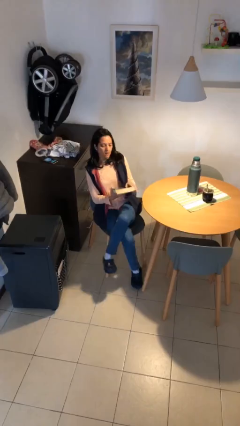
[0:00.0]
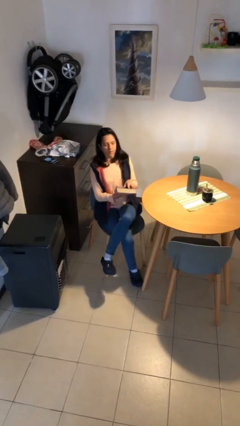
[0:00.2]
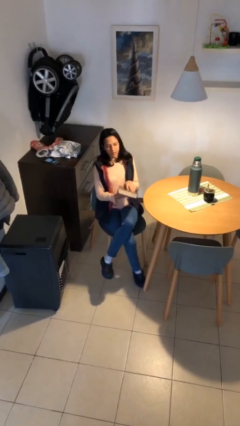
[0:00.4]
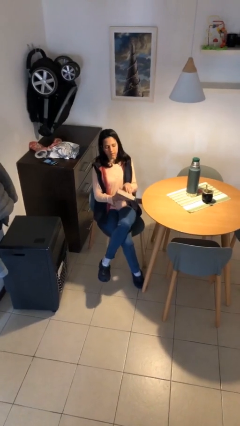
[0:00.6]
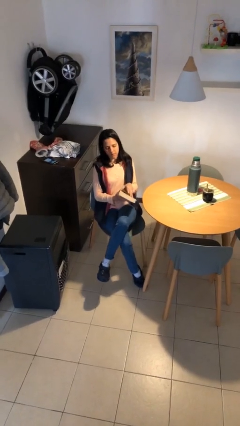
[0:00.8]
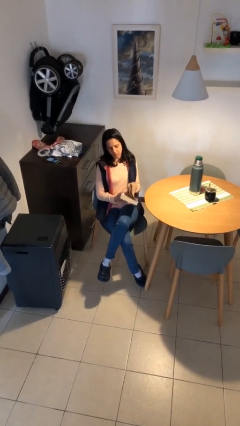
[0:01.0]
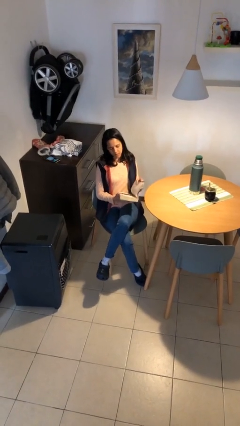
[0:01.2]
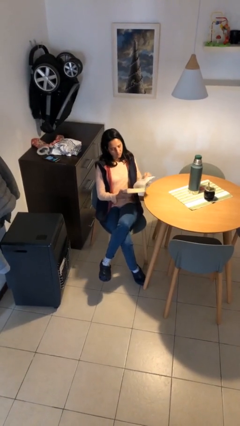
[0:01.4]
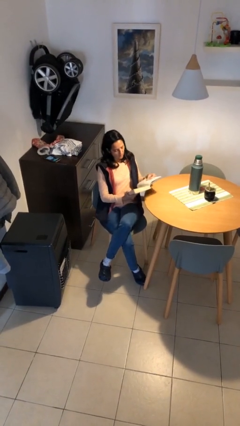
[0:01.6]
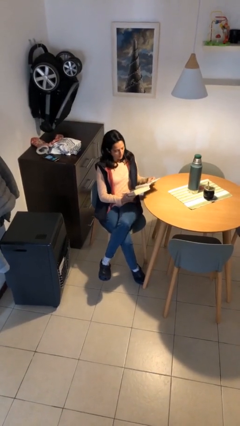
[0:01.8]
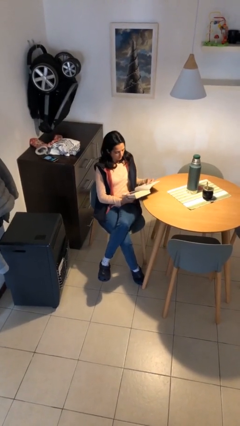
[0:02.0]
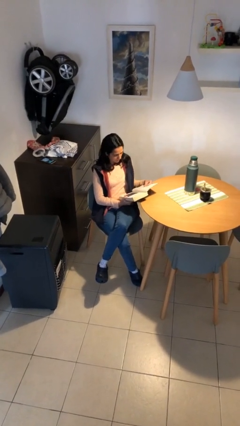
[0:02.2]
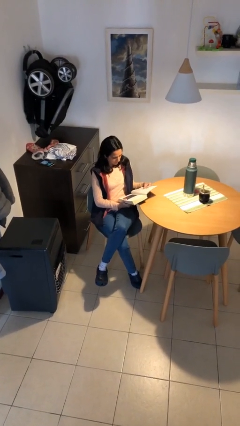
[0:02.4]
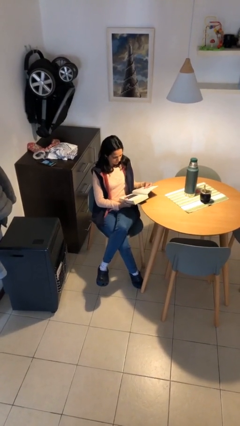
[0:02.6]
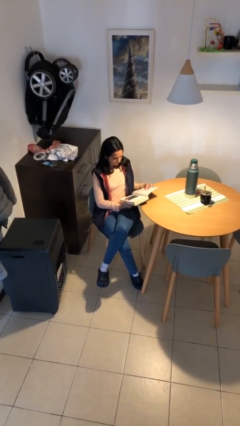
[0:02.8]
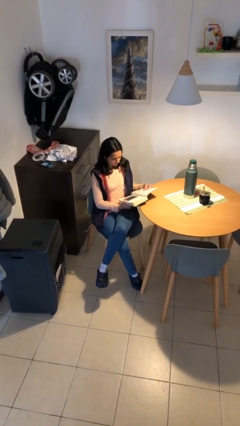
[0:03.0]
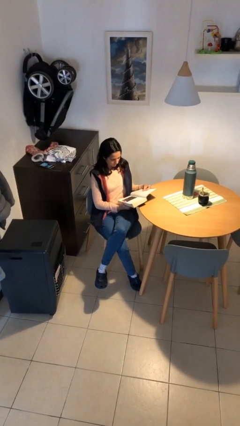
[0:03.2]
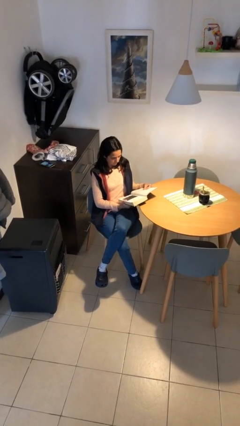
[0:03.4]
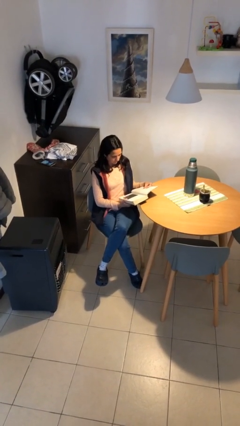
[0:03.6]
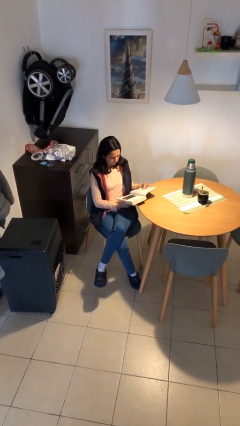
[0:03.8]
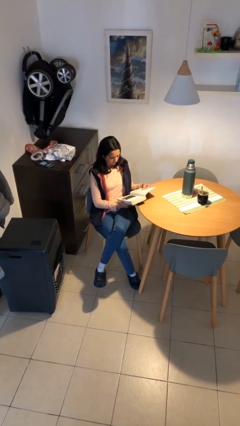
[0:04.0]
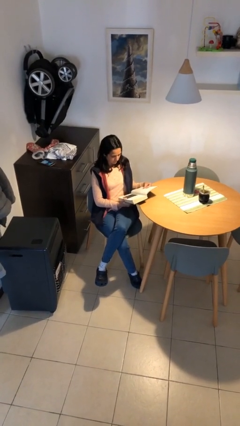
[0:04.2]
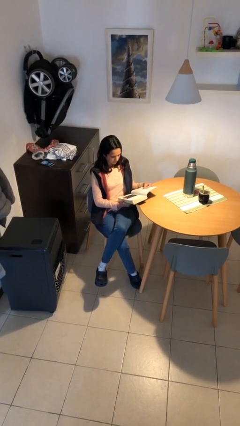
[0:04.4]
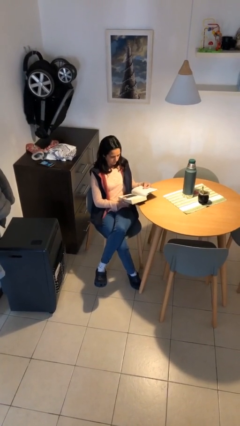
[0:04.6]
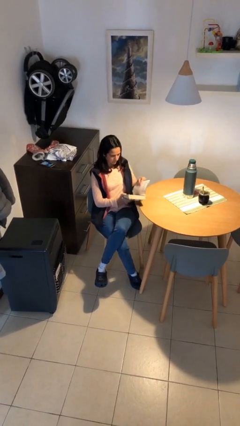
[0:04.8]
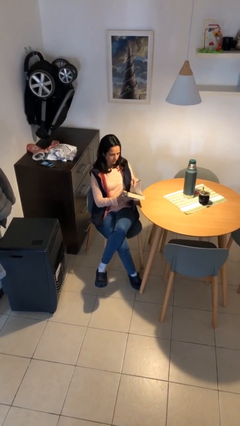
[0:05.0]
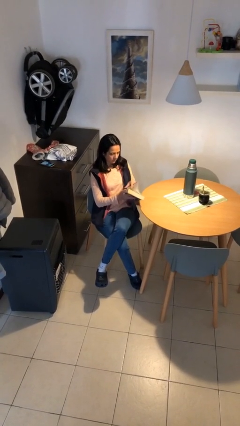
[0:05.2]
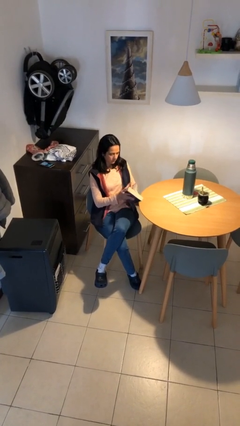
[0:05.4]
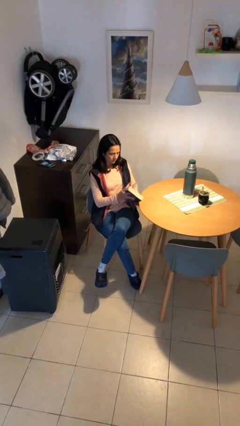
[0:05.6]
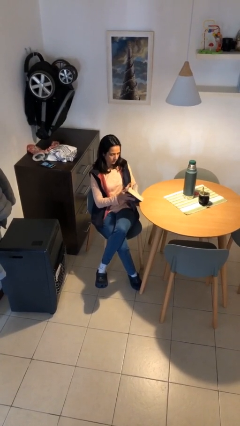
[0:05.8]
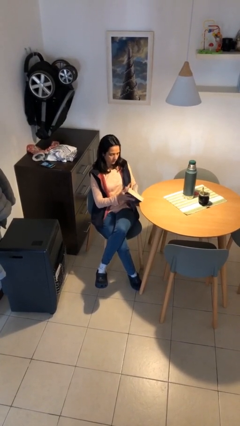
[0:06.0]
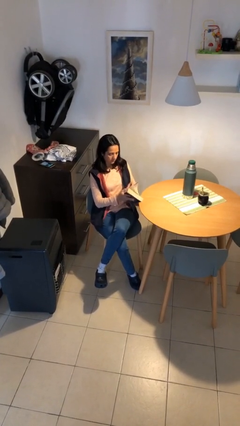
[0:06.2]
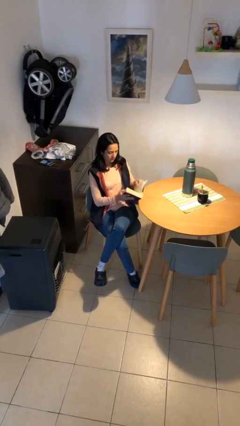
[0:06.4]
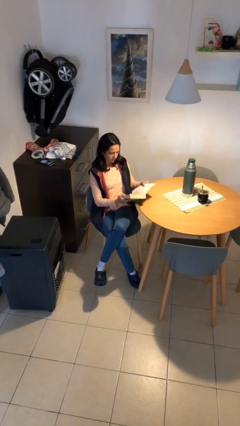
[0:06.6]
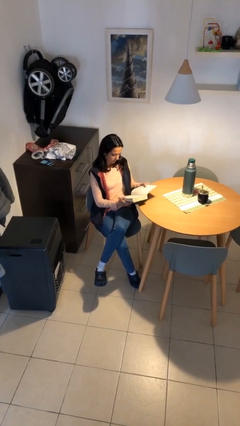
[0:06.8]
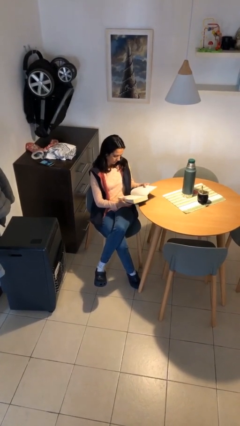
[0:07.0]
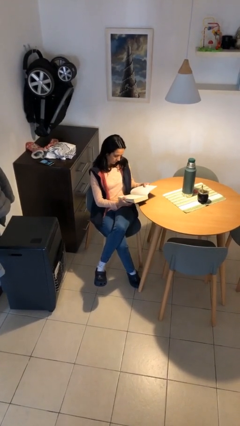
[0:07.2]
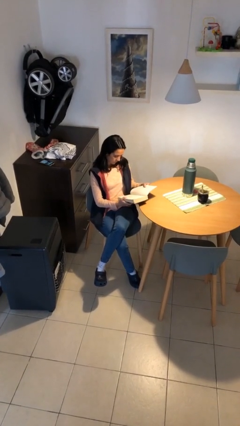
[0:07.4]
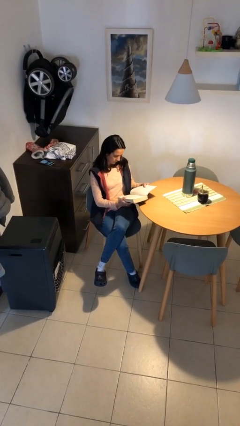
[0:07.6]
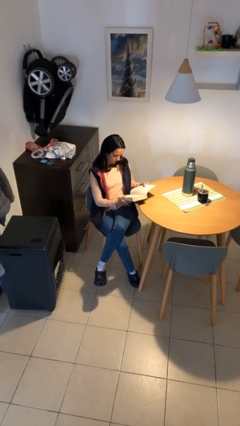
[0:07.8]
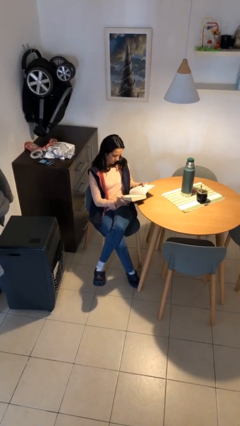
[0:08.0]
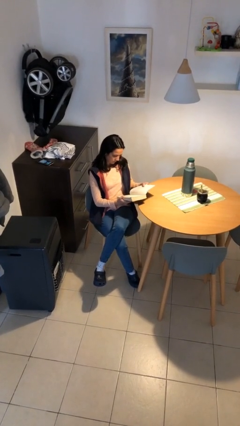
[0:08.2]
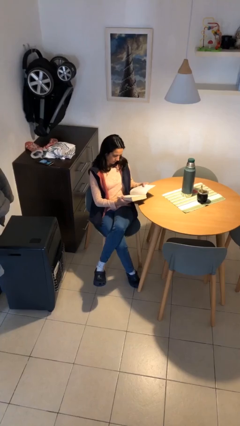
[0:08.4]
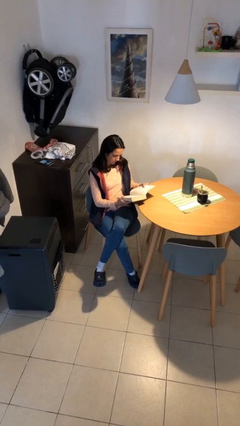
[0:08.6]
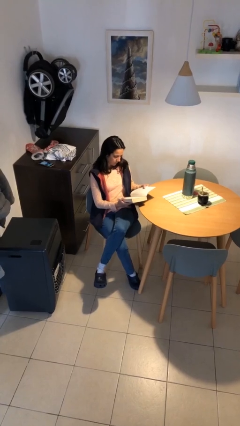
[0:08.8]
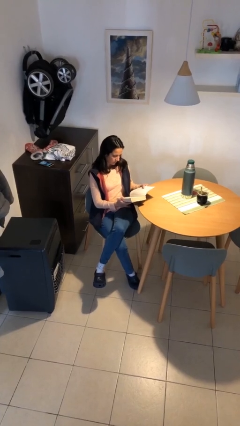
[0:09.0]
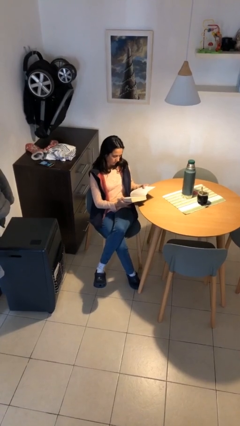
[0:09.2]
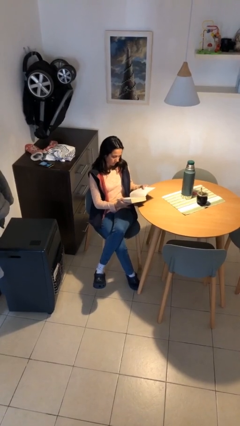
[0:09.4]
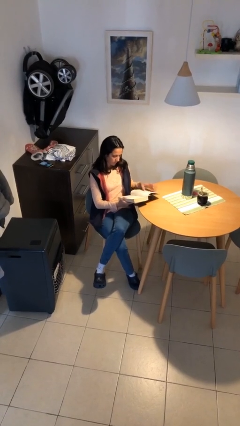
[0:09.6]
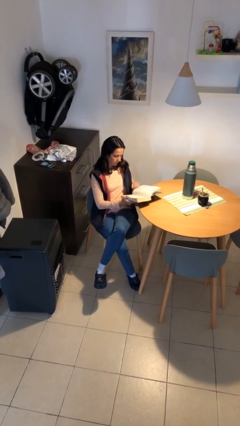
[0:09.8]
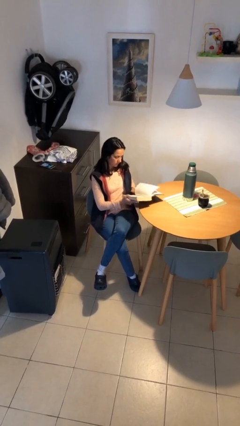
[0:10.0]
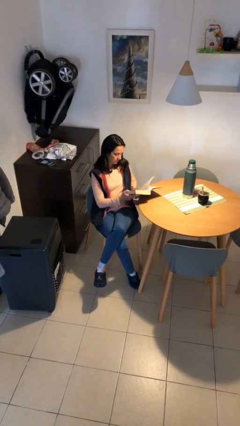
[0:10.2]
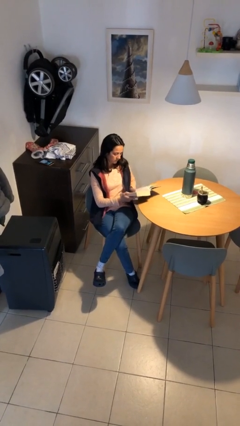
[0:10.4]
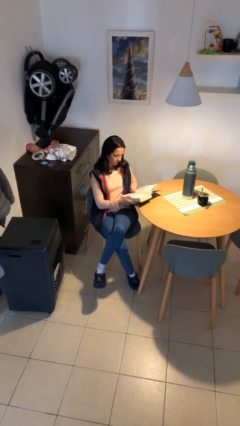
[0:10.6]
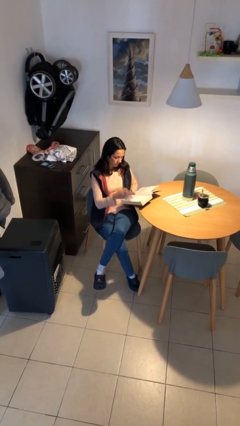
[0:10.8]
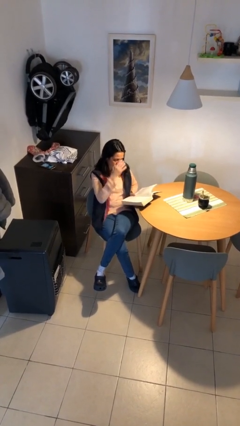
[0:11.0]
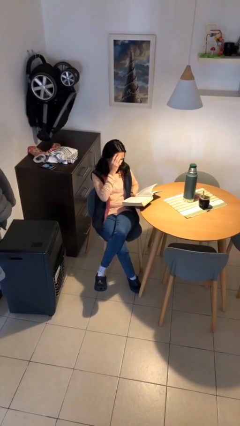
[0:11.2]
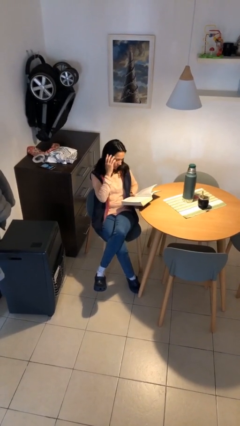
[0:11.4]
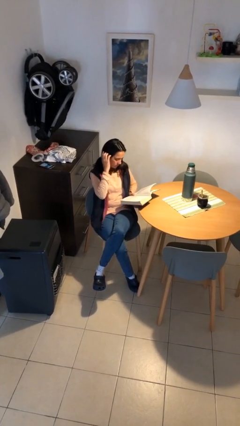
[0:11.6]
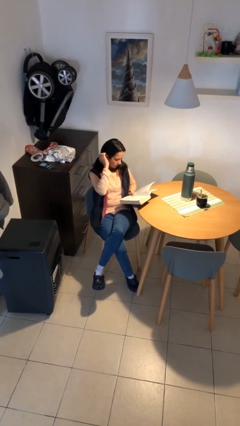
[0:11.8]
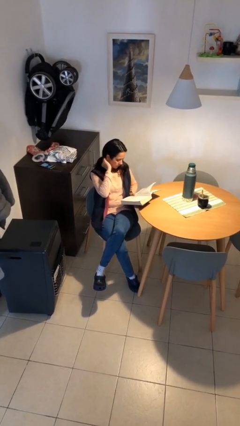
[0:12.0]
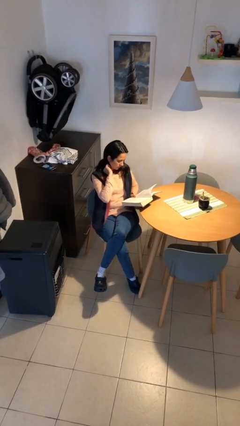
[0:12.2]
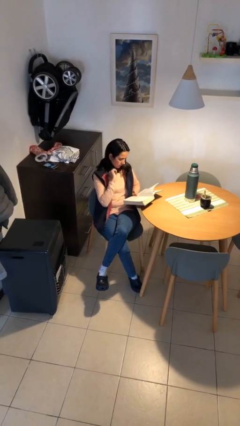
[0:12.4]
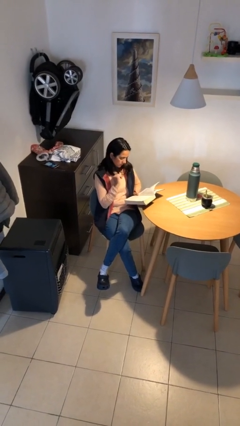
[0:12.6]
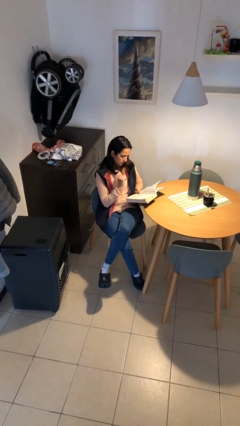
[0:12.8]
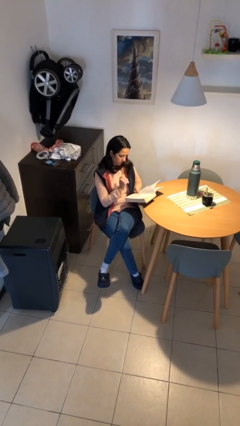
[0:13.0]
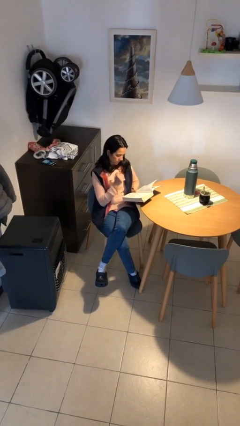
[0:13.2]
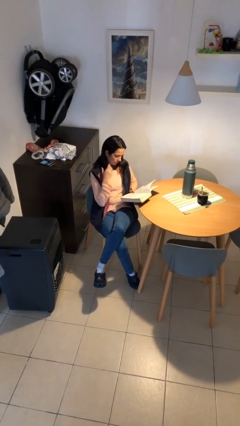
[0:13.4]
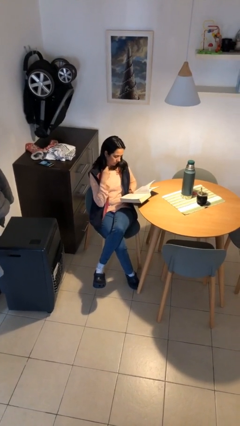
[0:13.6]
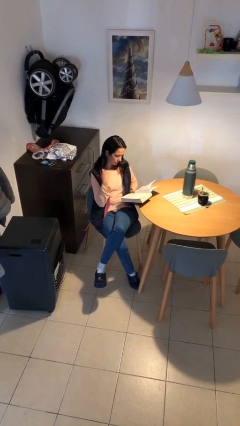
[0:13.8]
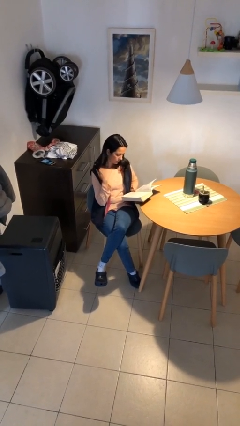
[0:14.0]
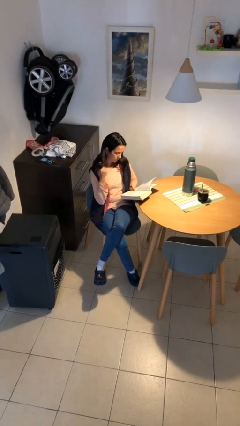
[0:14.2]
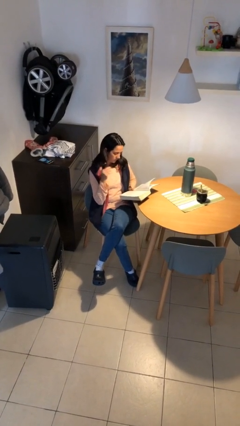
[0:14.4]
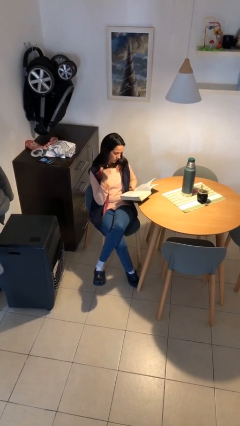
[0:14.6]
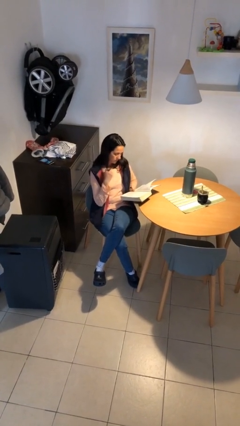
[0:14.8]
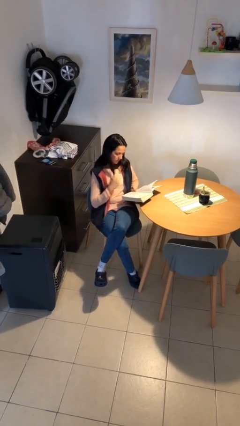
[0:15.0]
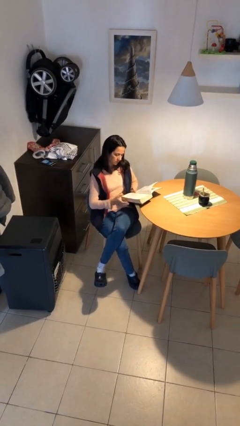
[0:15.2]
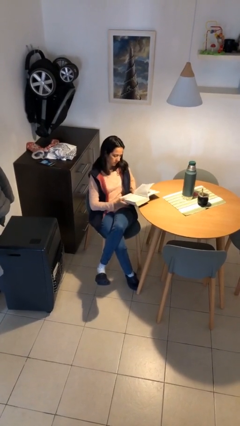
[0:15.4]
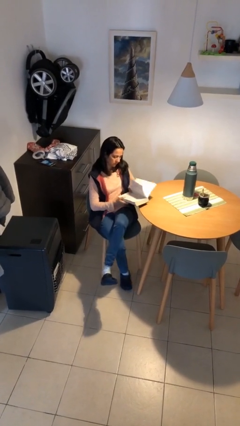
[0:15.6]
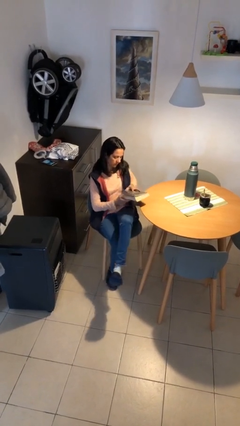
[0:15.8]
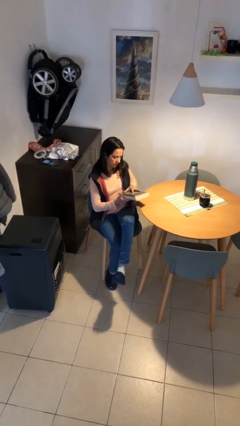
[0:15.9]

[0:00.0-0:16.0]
person reads document

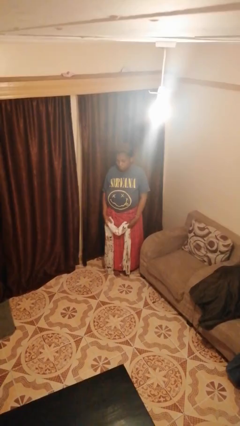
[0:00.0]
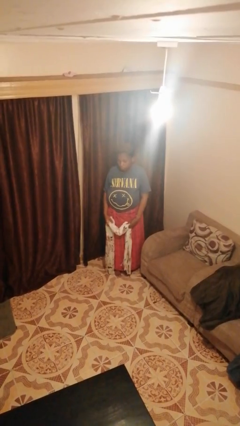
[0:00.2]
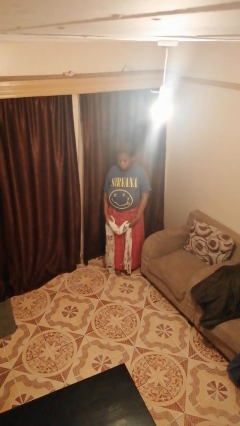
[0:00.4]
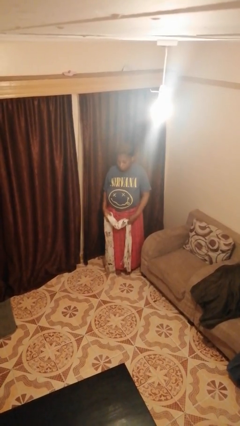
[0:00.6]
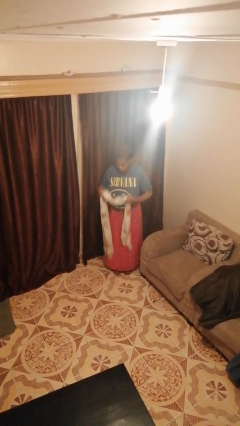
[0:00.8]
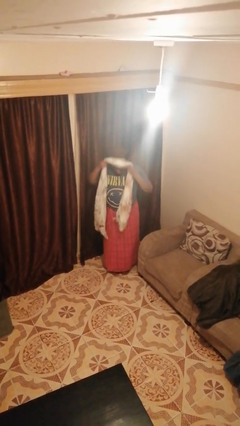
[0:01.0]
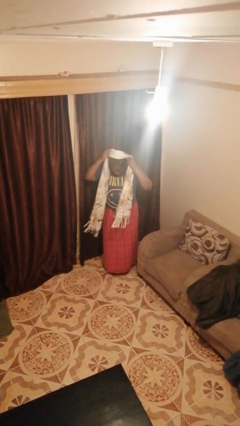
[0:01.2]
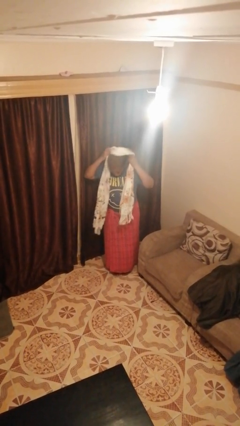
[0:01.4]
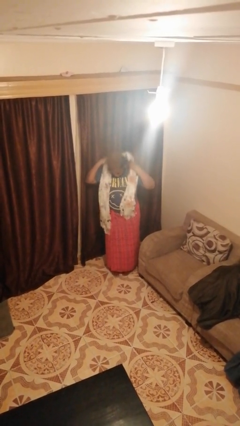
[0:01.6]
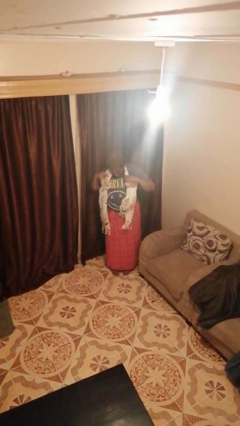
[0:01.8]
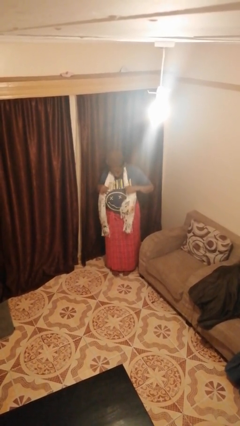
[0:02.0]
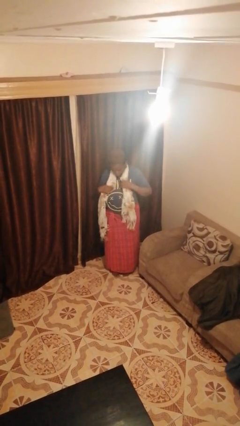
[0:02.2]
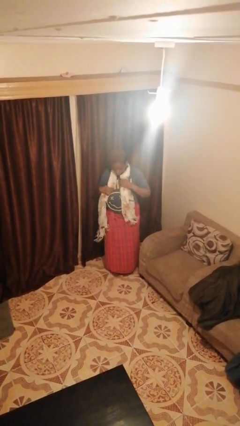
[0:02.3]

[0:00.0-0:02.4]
person puts on scarf
